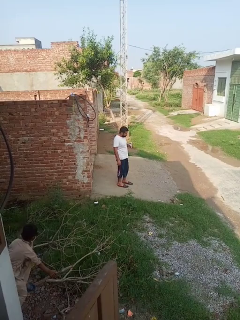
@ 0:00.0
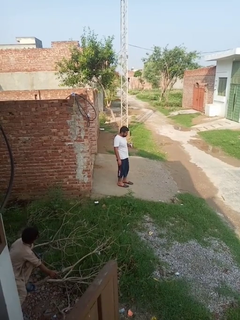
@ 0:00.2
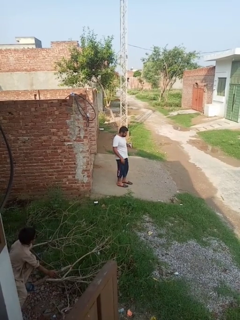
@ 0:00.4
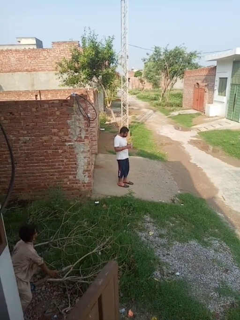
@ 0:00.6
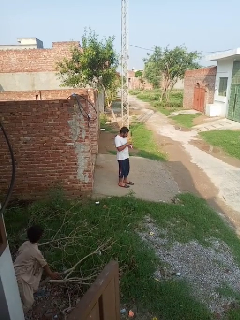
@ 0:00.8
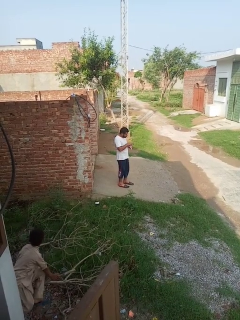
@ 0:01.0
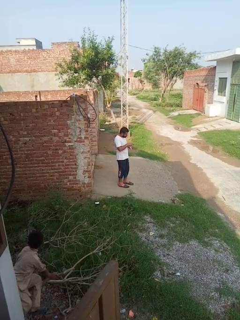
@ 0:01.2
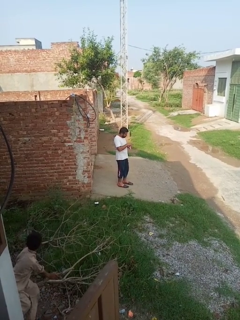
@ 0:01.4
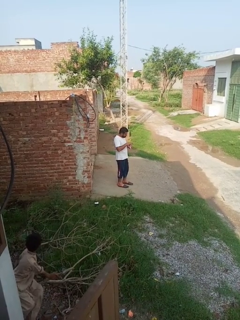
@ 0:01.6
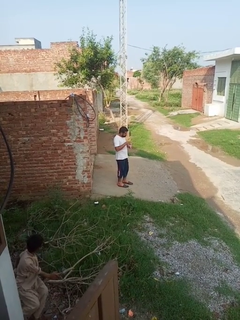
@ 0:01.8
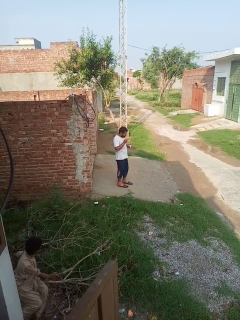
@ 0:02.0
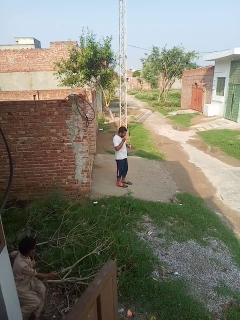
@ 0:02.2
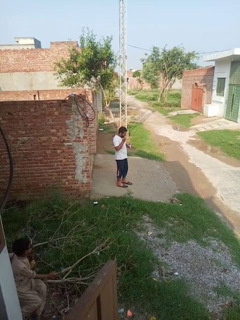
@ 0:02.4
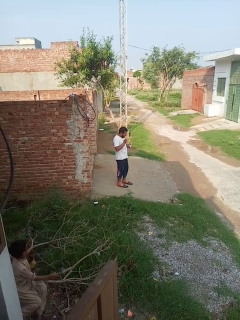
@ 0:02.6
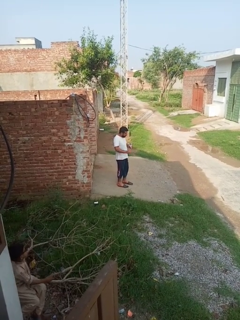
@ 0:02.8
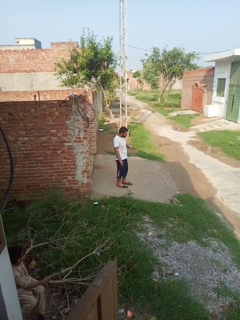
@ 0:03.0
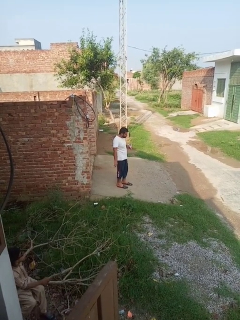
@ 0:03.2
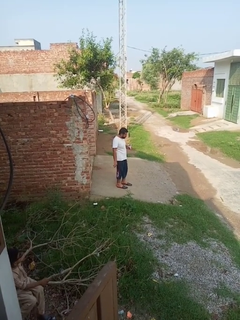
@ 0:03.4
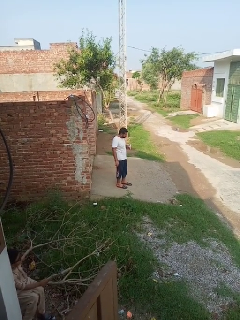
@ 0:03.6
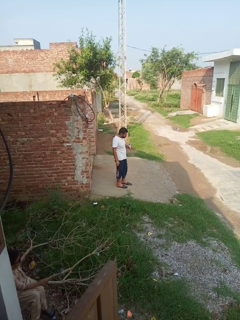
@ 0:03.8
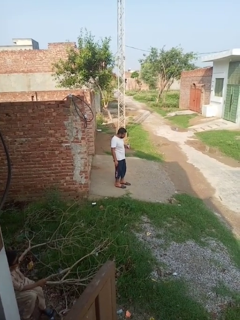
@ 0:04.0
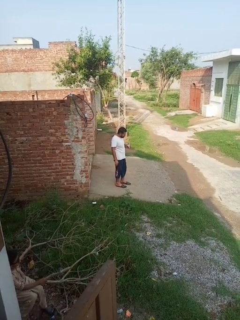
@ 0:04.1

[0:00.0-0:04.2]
person eats snack from bag

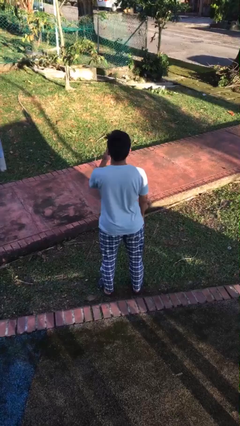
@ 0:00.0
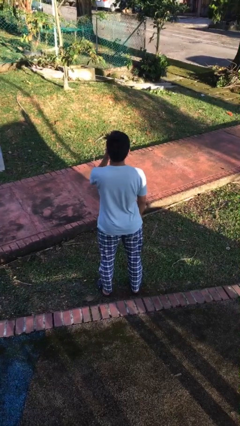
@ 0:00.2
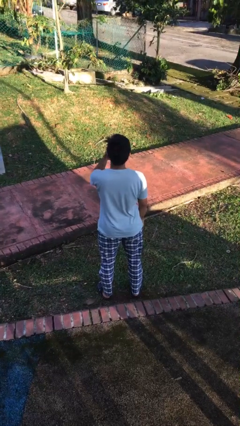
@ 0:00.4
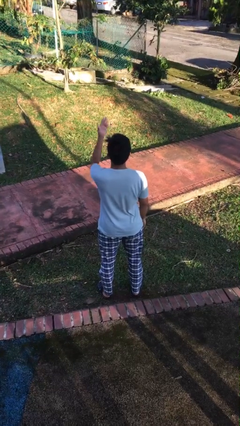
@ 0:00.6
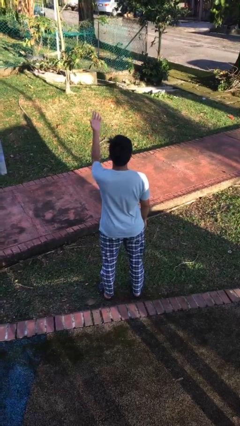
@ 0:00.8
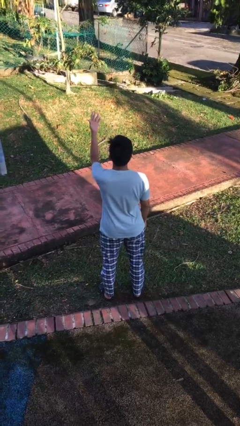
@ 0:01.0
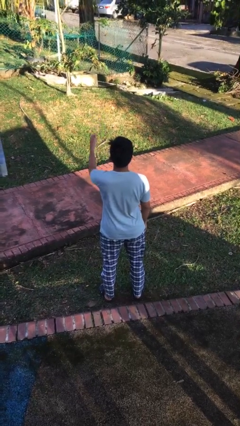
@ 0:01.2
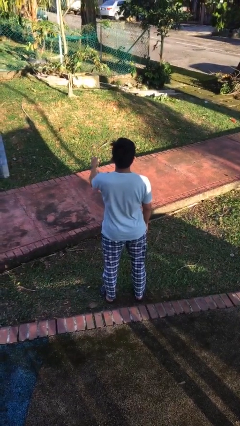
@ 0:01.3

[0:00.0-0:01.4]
person gestures blow kiss

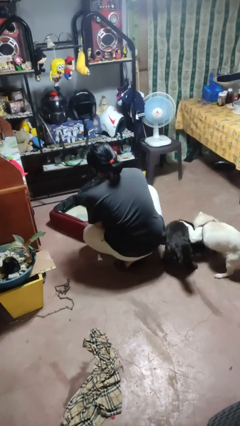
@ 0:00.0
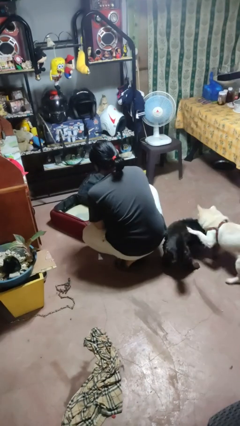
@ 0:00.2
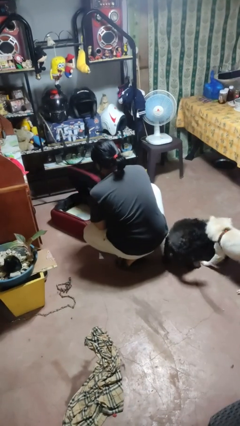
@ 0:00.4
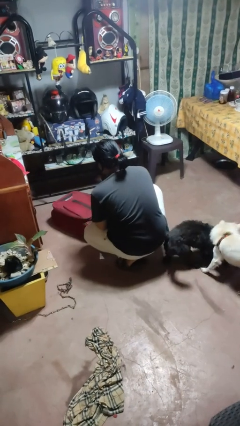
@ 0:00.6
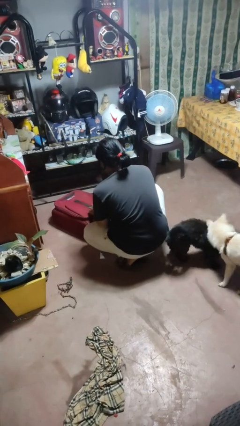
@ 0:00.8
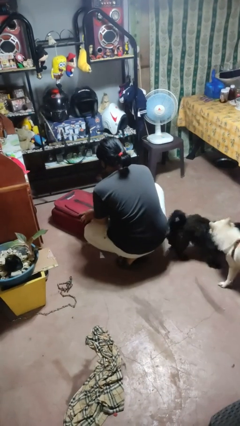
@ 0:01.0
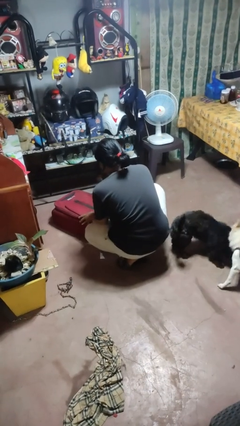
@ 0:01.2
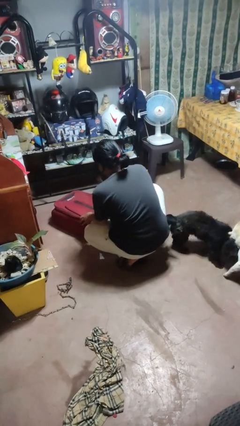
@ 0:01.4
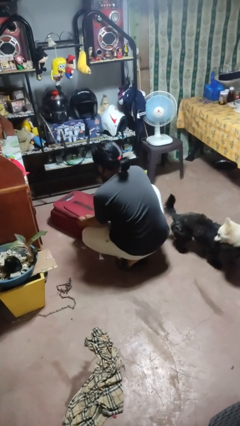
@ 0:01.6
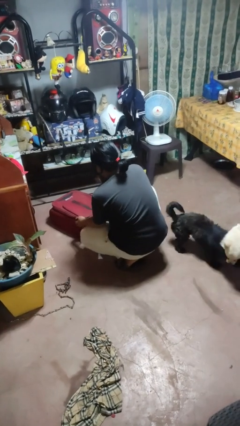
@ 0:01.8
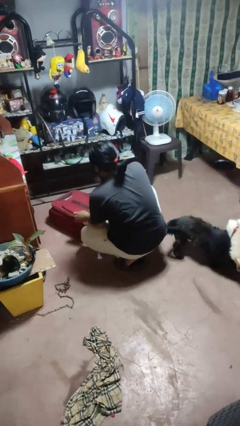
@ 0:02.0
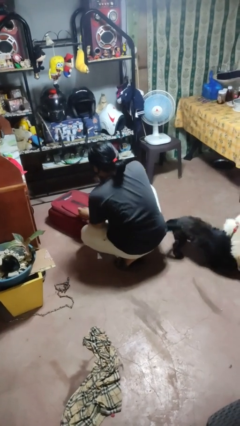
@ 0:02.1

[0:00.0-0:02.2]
person closes suitcase

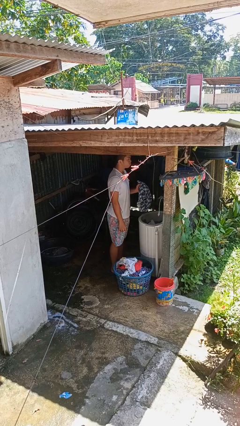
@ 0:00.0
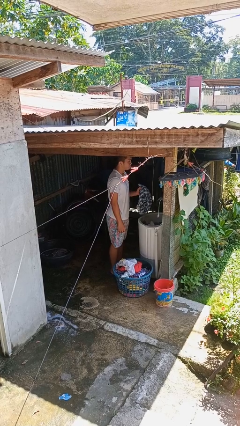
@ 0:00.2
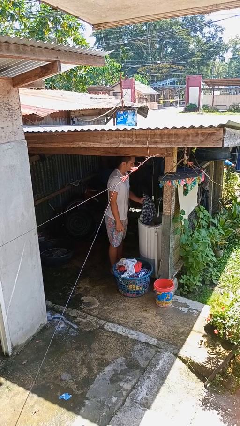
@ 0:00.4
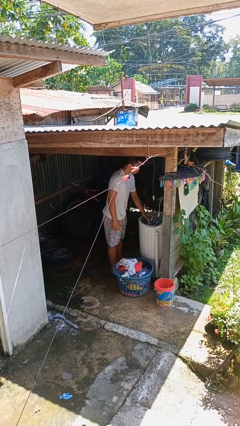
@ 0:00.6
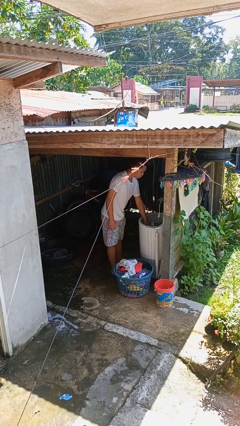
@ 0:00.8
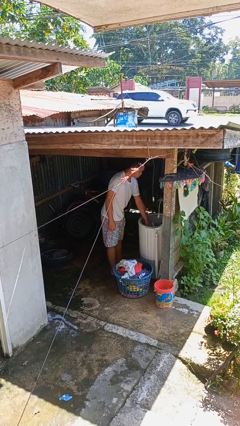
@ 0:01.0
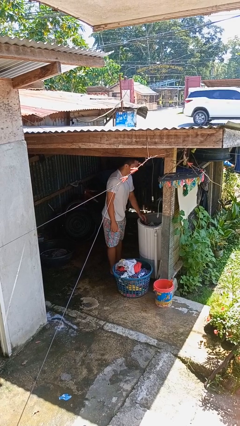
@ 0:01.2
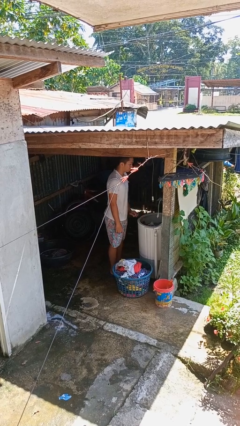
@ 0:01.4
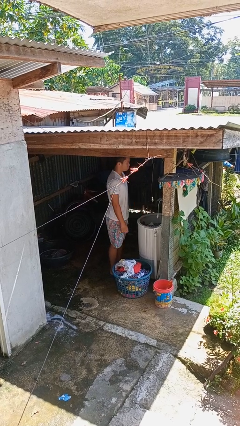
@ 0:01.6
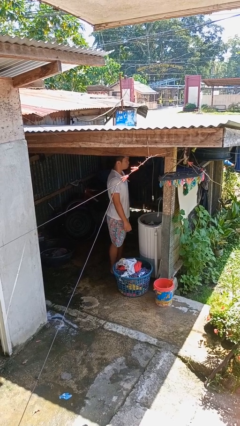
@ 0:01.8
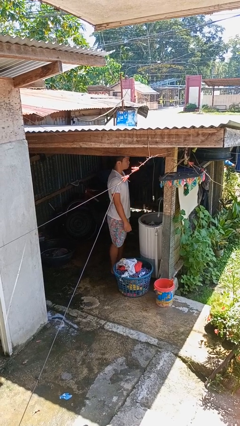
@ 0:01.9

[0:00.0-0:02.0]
person loads clotheswasher

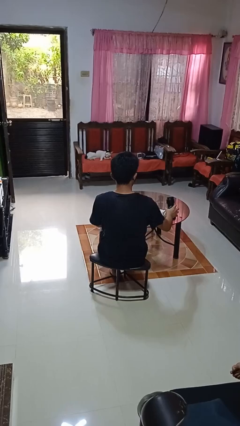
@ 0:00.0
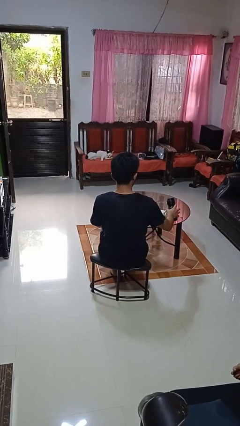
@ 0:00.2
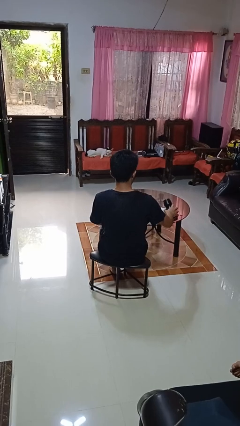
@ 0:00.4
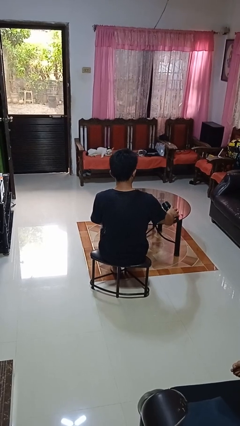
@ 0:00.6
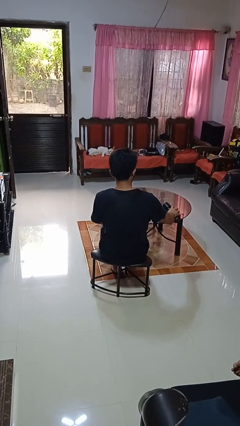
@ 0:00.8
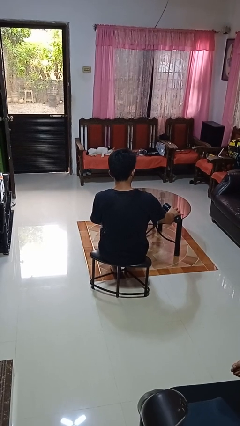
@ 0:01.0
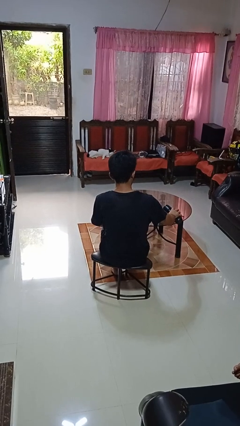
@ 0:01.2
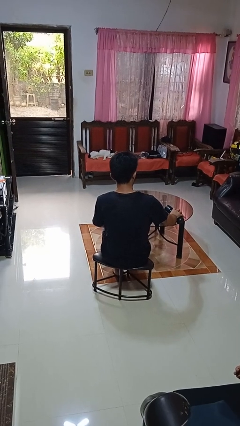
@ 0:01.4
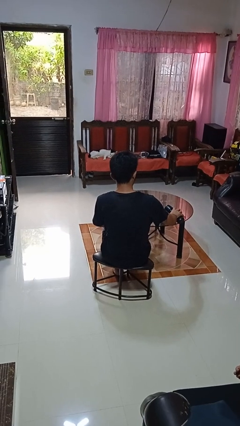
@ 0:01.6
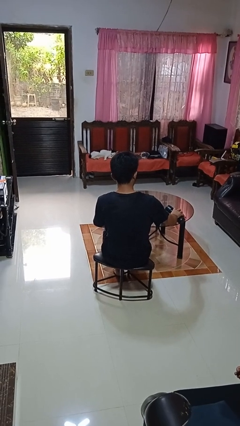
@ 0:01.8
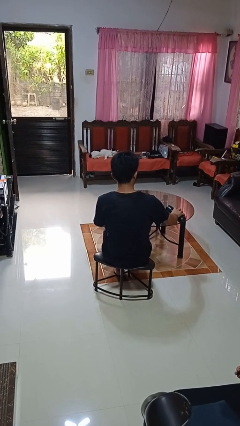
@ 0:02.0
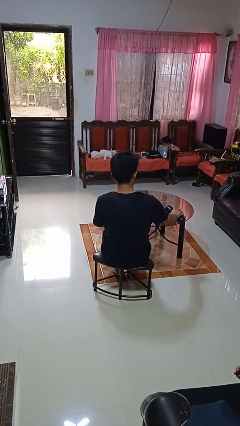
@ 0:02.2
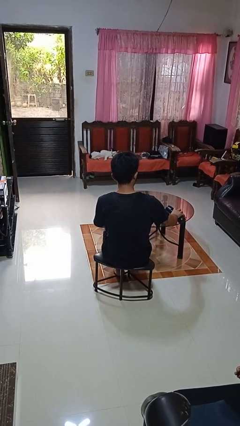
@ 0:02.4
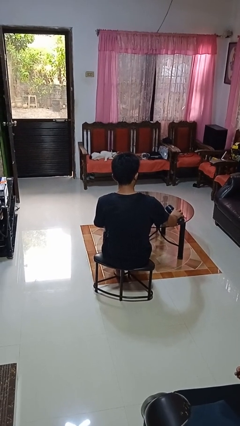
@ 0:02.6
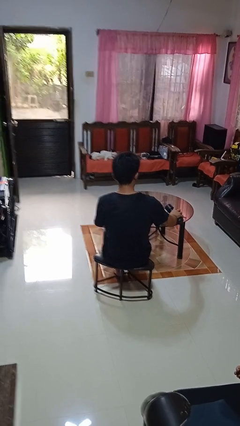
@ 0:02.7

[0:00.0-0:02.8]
person pours liquid into cup

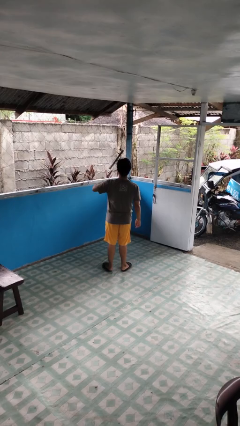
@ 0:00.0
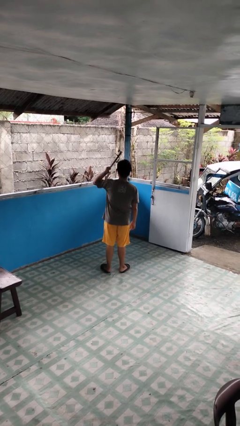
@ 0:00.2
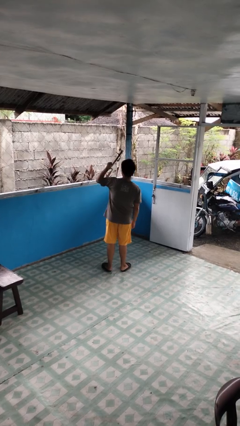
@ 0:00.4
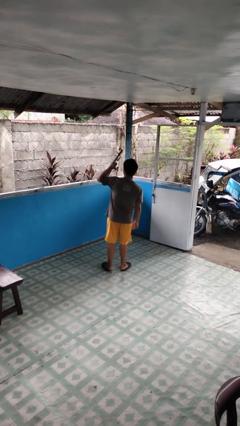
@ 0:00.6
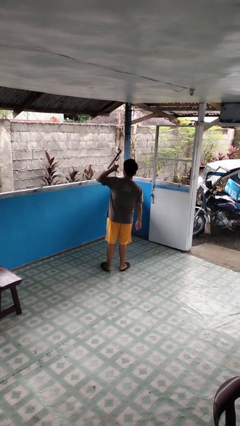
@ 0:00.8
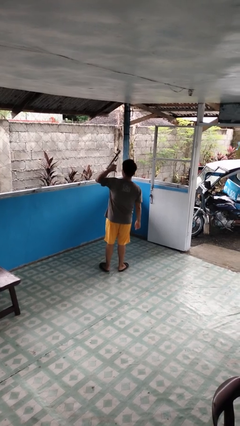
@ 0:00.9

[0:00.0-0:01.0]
person gestures behind me

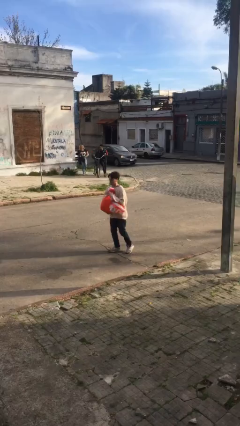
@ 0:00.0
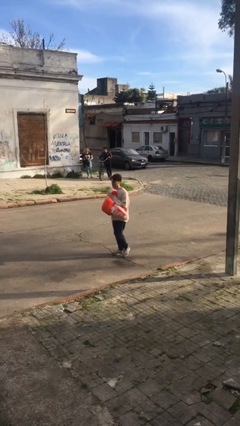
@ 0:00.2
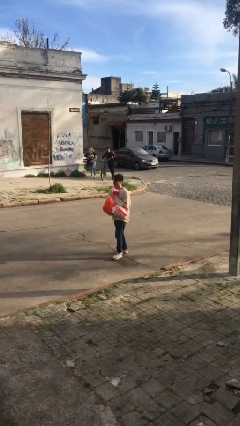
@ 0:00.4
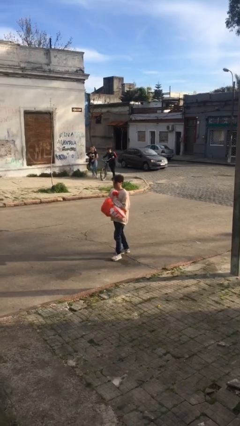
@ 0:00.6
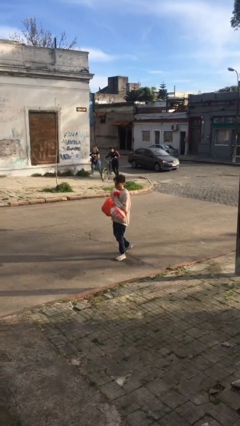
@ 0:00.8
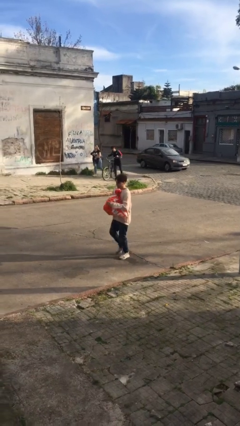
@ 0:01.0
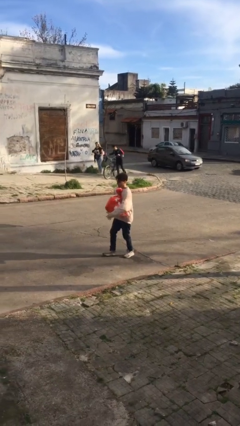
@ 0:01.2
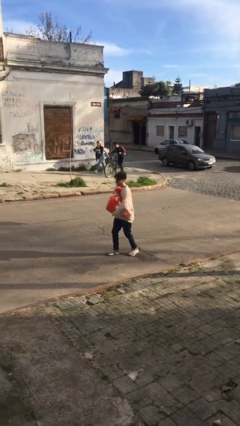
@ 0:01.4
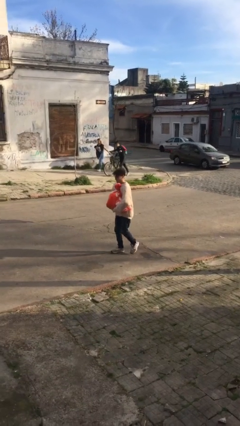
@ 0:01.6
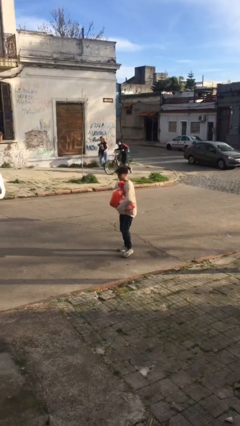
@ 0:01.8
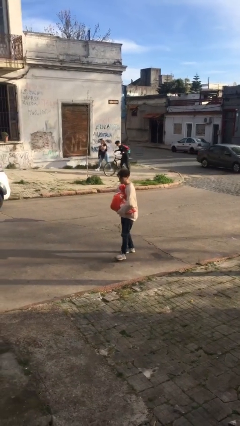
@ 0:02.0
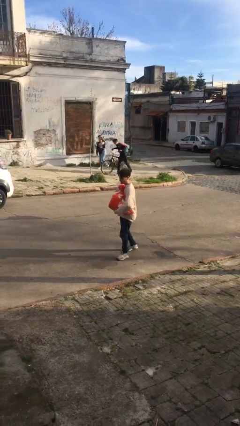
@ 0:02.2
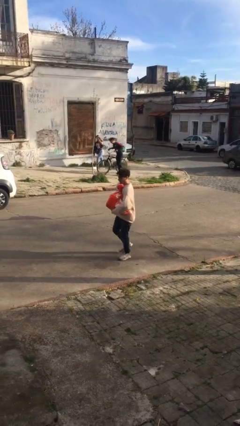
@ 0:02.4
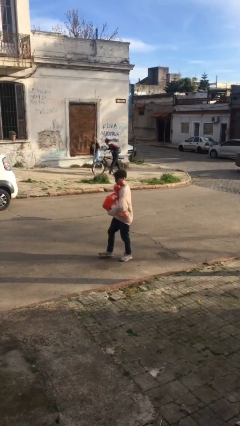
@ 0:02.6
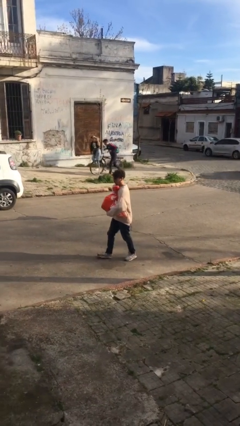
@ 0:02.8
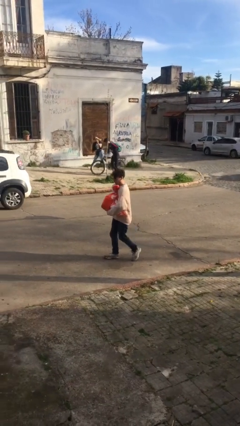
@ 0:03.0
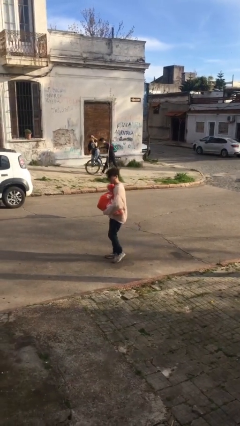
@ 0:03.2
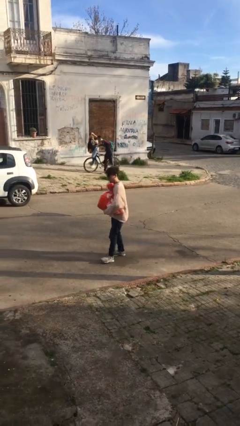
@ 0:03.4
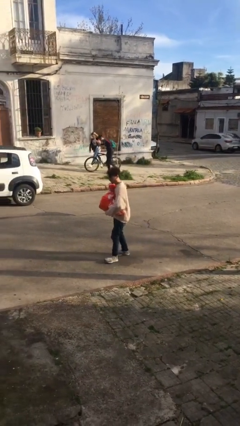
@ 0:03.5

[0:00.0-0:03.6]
person carries heavy object

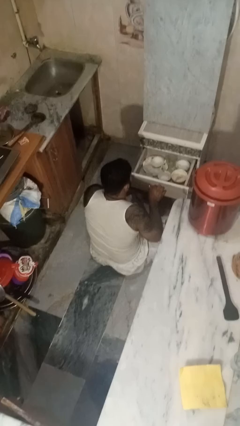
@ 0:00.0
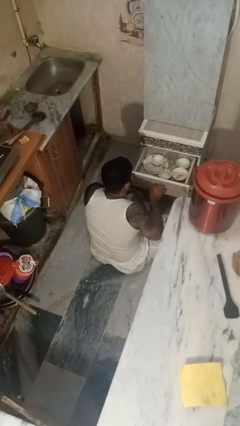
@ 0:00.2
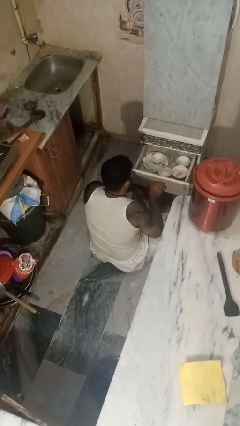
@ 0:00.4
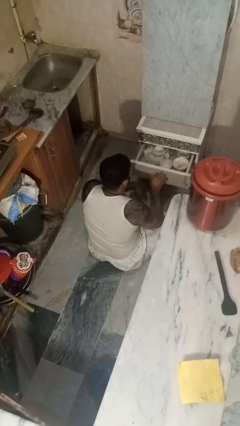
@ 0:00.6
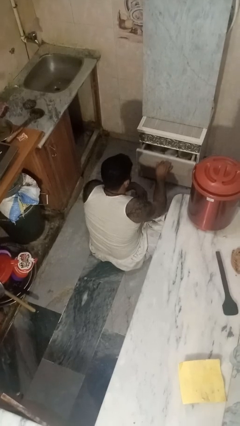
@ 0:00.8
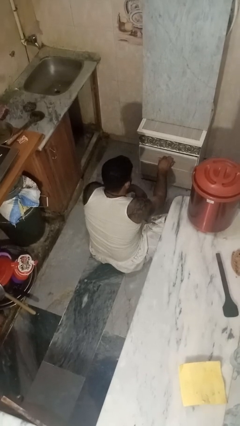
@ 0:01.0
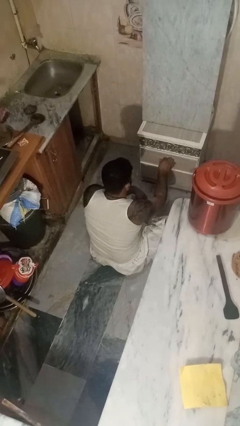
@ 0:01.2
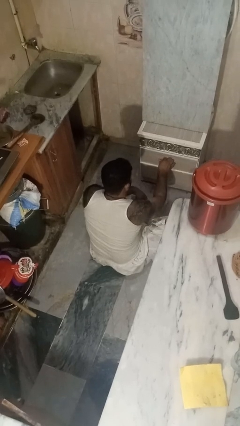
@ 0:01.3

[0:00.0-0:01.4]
person closes kitchen drawer
